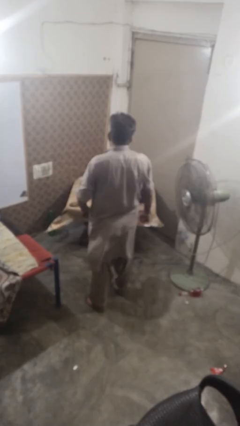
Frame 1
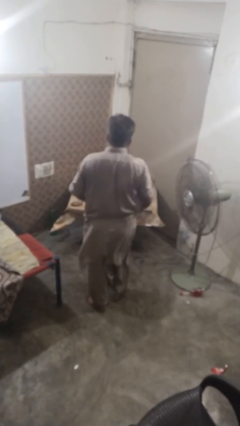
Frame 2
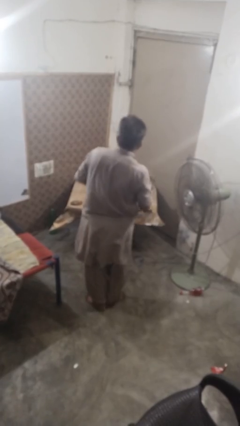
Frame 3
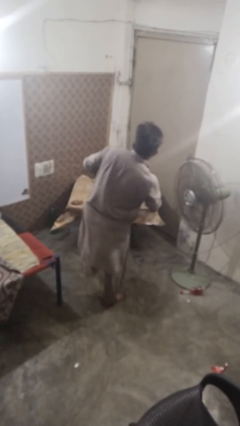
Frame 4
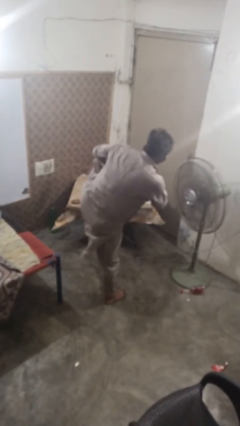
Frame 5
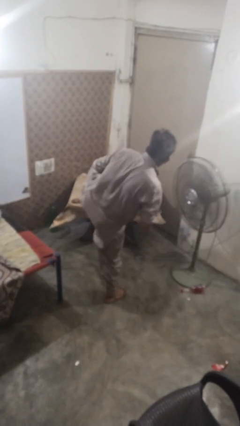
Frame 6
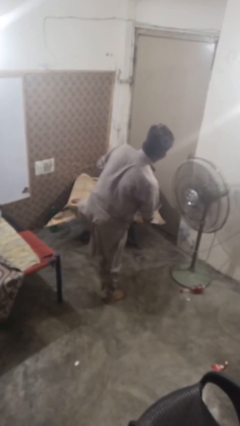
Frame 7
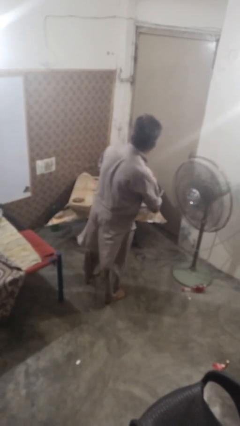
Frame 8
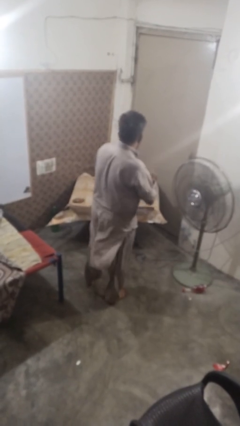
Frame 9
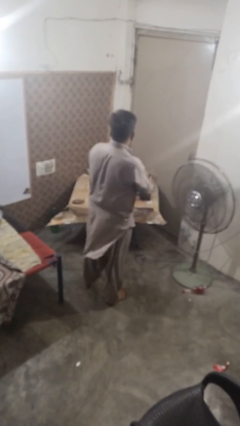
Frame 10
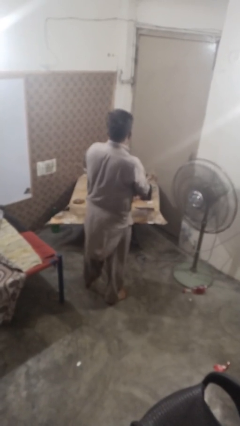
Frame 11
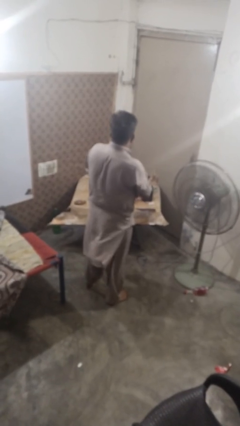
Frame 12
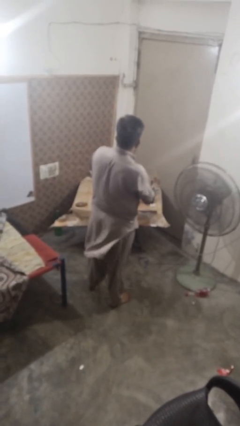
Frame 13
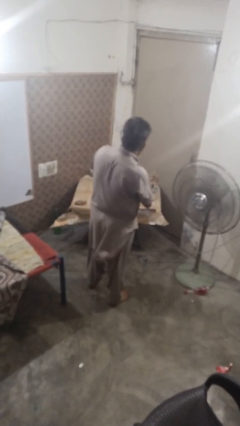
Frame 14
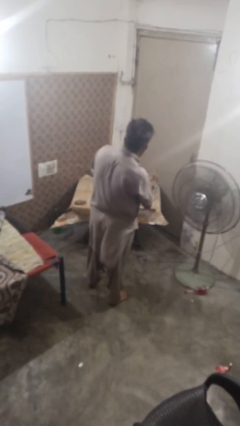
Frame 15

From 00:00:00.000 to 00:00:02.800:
person karate kicks

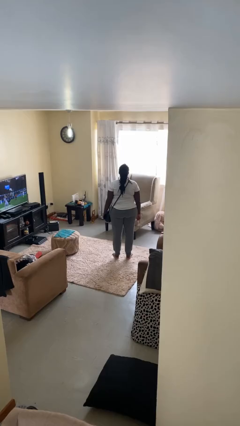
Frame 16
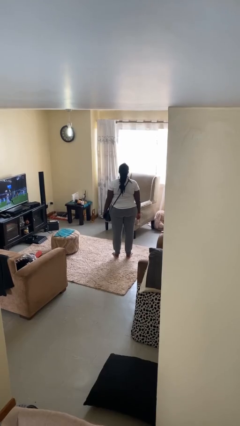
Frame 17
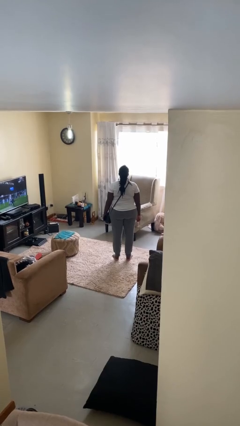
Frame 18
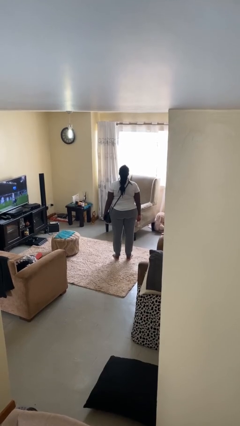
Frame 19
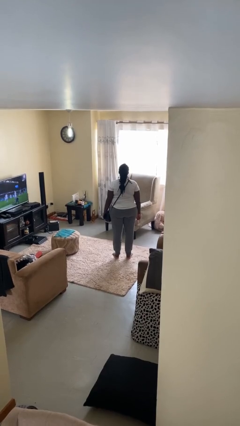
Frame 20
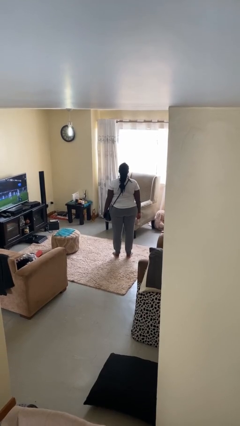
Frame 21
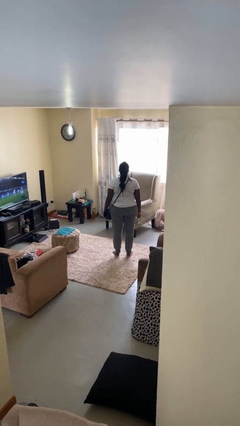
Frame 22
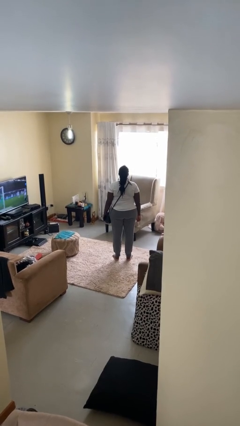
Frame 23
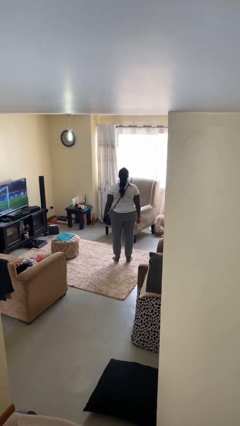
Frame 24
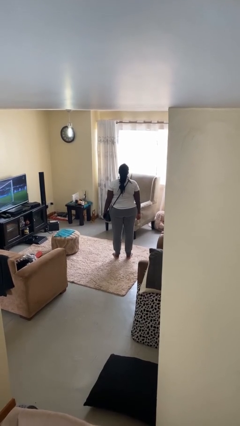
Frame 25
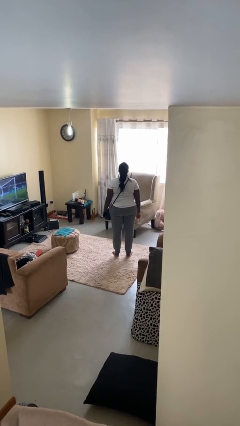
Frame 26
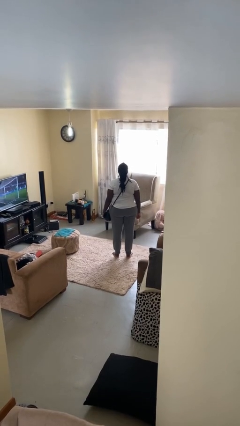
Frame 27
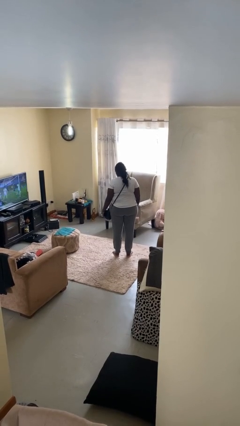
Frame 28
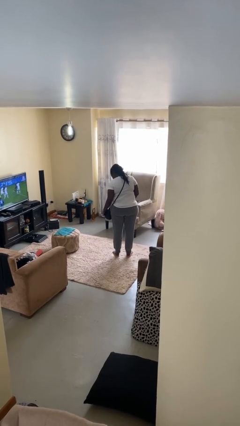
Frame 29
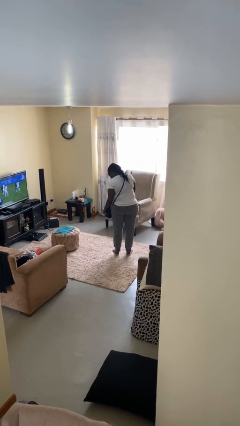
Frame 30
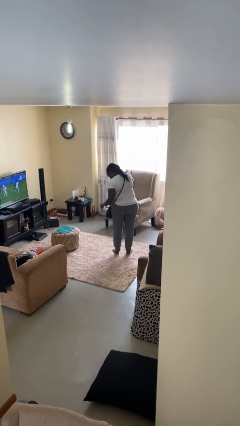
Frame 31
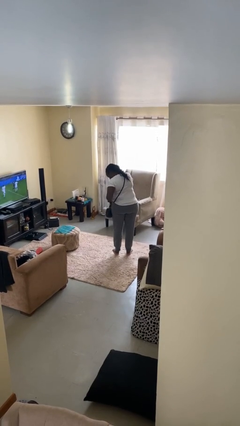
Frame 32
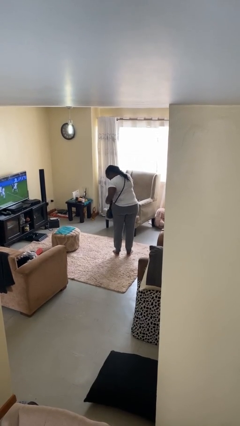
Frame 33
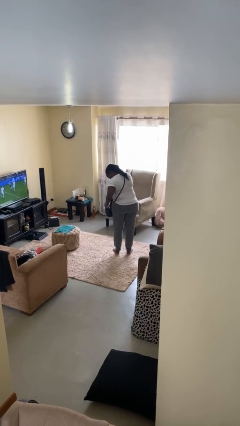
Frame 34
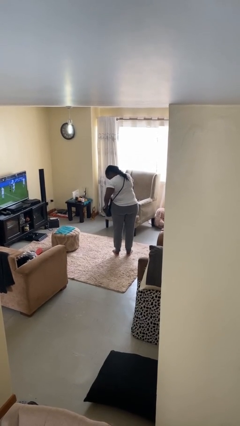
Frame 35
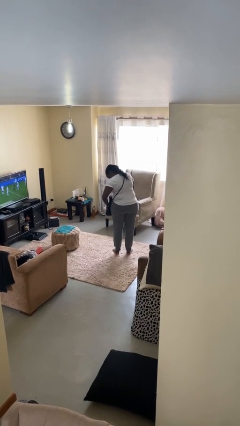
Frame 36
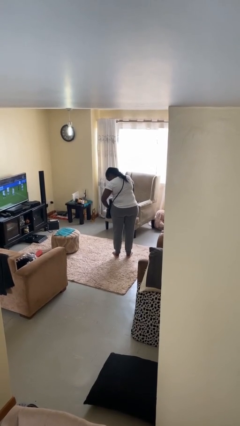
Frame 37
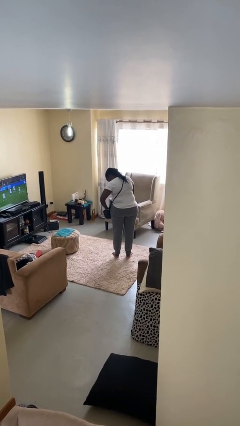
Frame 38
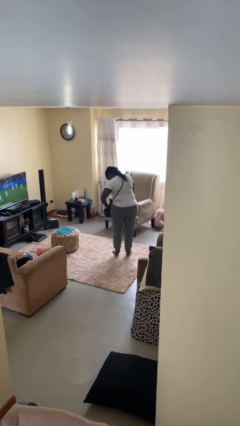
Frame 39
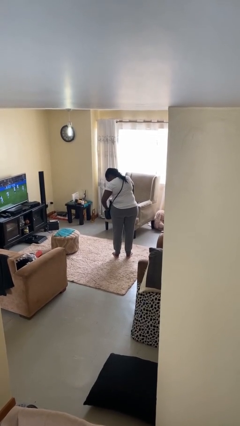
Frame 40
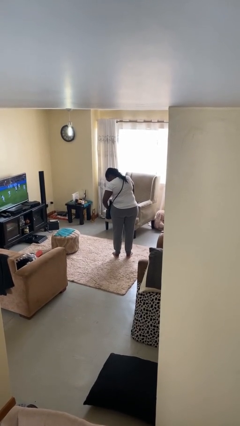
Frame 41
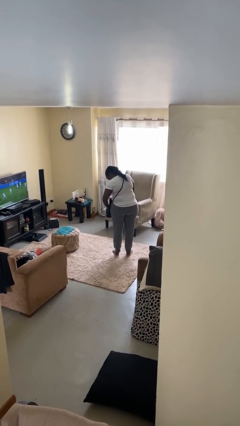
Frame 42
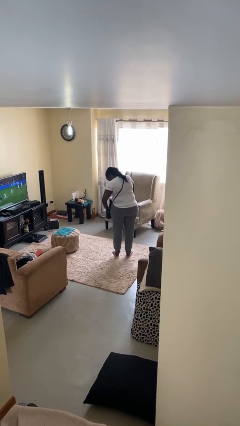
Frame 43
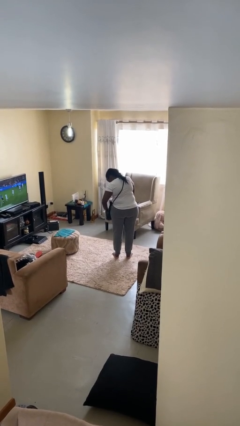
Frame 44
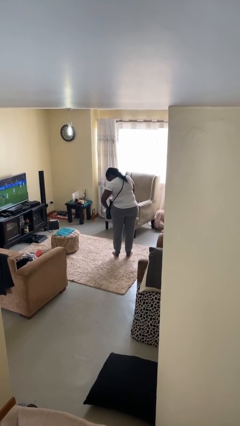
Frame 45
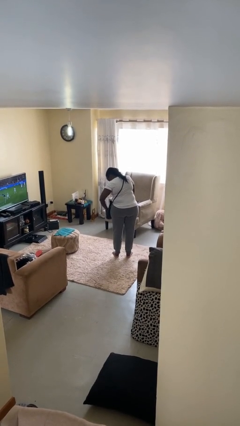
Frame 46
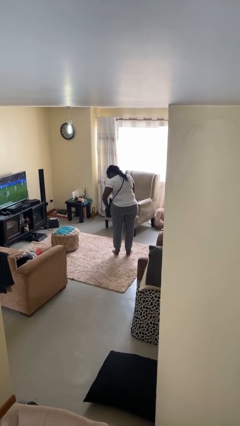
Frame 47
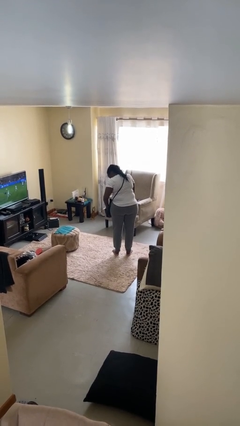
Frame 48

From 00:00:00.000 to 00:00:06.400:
person searches in purse

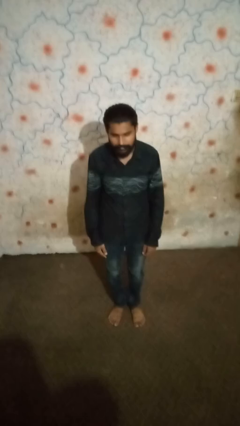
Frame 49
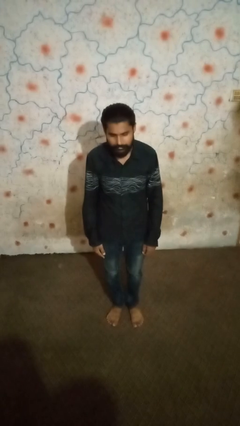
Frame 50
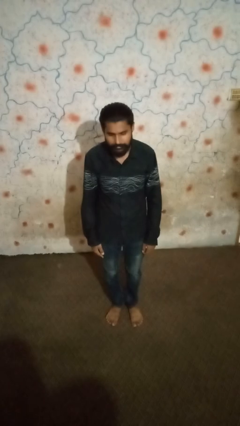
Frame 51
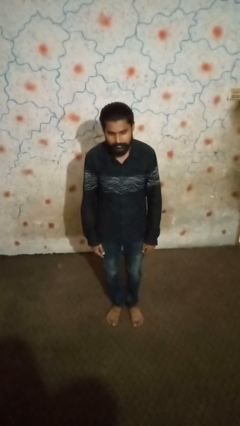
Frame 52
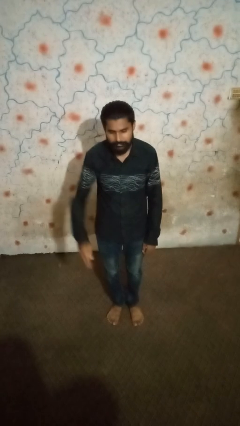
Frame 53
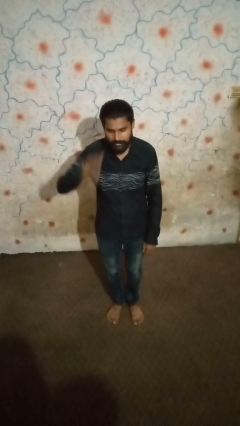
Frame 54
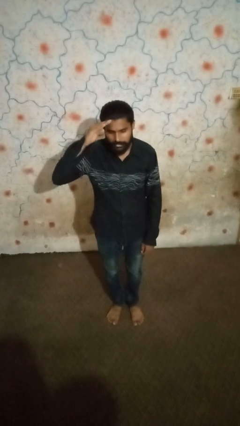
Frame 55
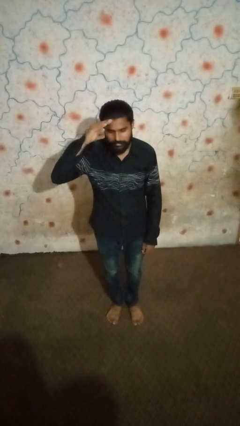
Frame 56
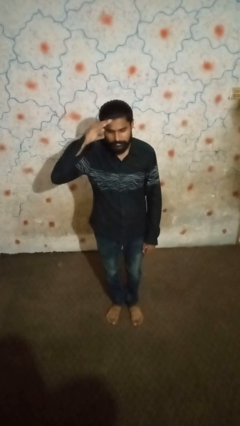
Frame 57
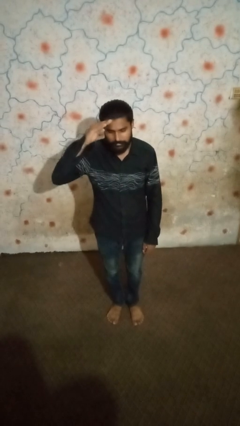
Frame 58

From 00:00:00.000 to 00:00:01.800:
person salutes

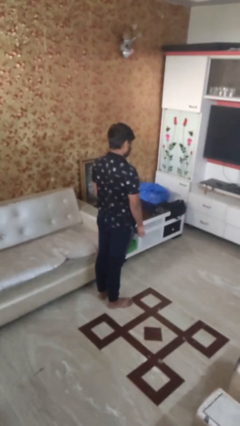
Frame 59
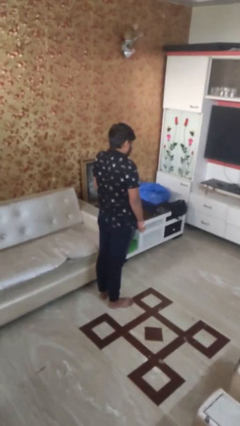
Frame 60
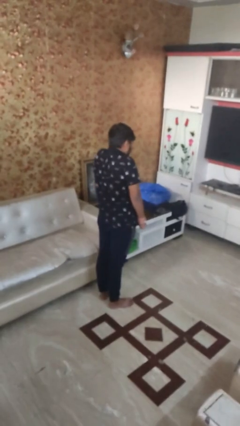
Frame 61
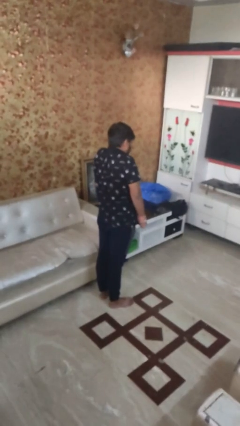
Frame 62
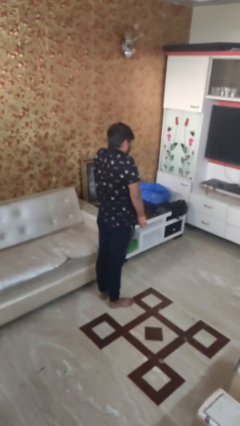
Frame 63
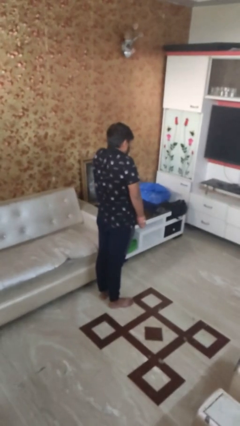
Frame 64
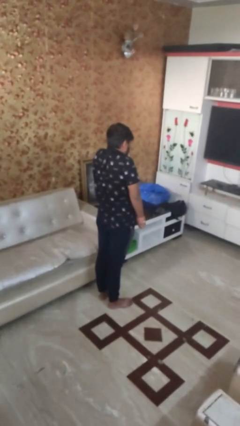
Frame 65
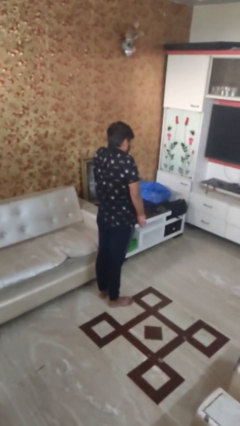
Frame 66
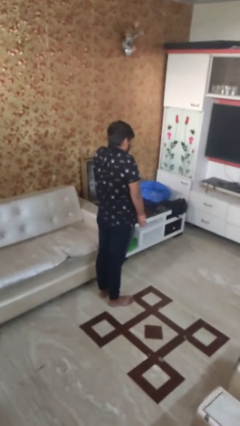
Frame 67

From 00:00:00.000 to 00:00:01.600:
person shrugs

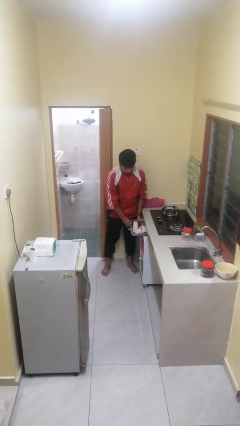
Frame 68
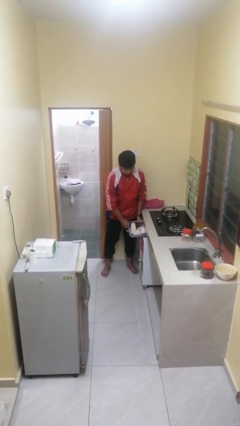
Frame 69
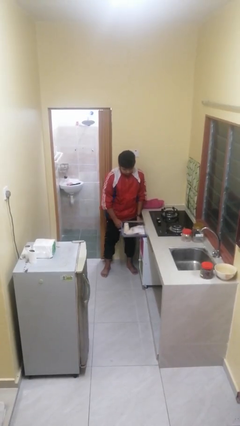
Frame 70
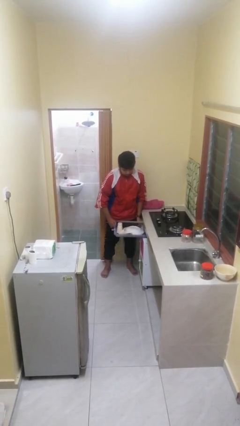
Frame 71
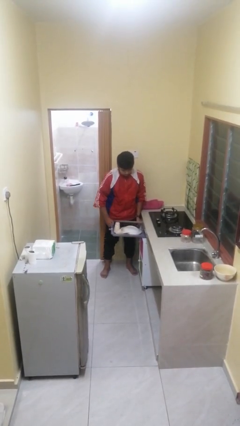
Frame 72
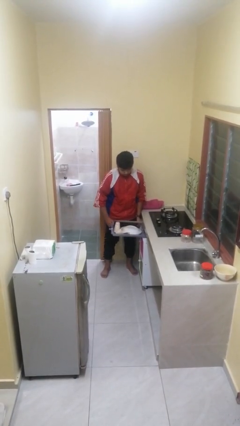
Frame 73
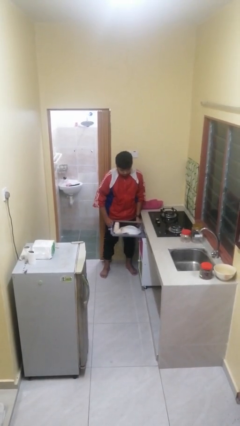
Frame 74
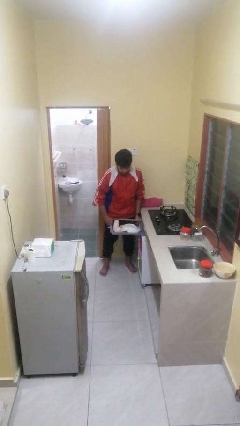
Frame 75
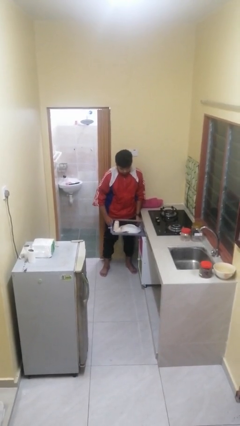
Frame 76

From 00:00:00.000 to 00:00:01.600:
person opens kitchen drawer

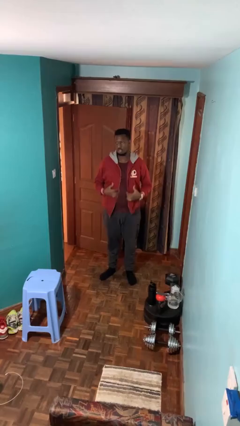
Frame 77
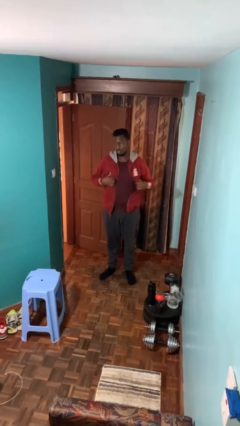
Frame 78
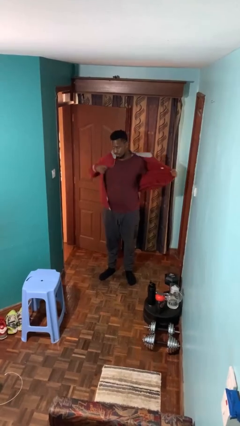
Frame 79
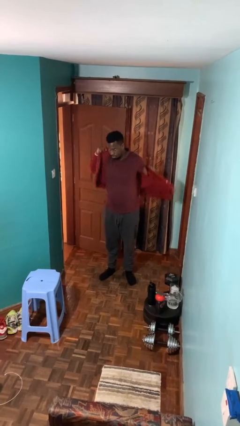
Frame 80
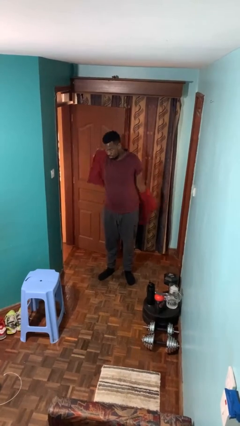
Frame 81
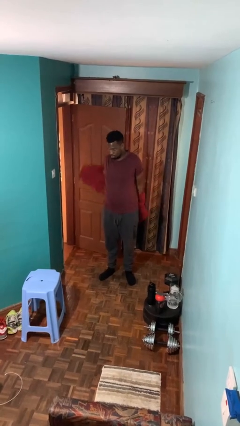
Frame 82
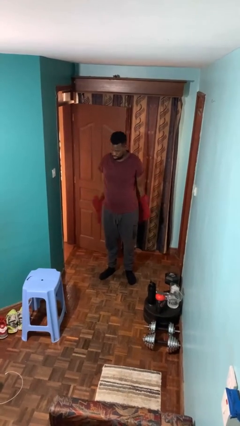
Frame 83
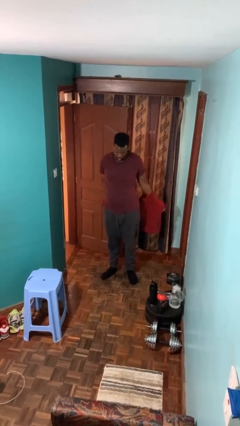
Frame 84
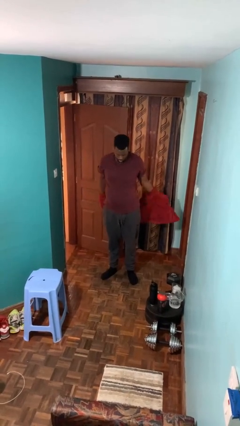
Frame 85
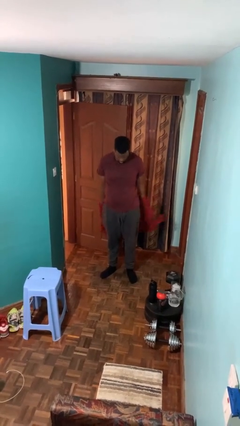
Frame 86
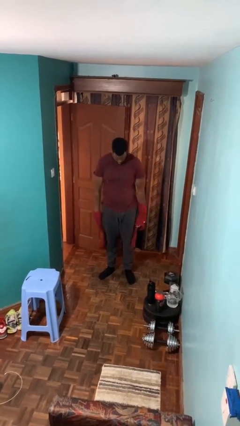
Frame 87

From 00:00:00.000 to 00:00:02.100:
person takes off jacket

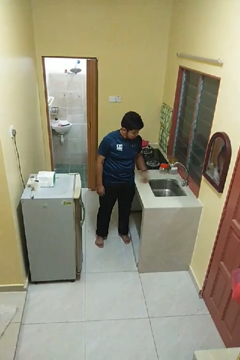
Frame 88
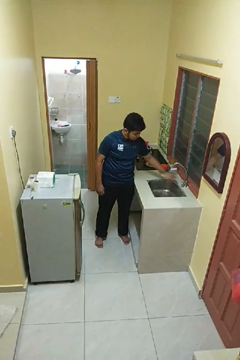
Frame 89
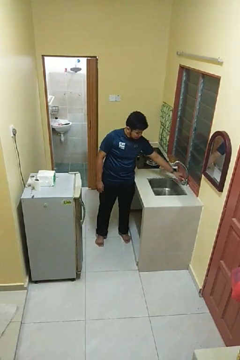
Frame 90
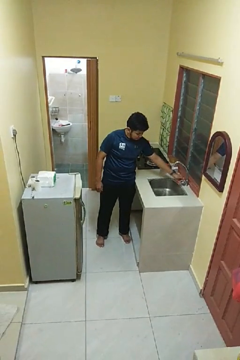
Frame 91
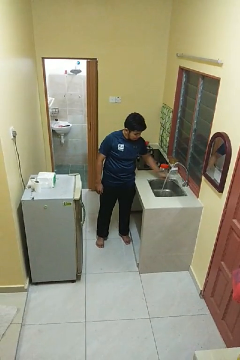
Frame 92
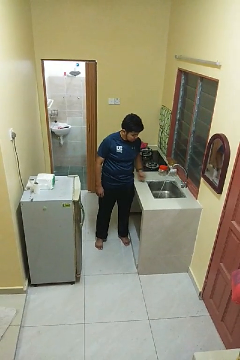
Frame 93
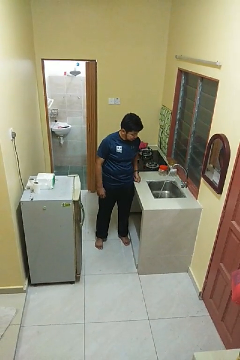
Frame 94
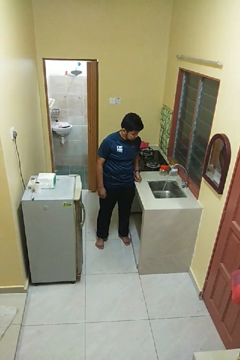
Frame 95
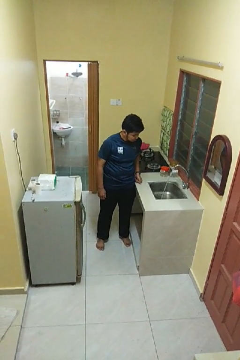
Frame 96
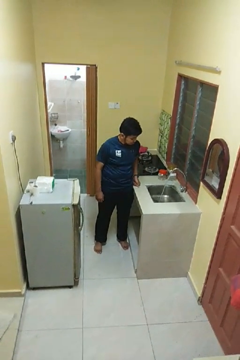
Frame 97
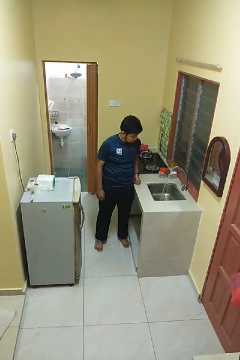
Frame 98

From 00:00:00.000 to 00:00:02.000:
person turns on faucet
